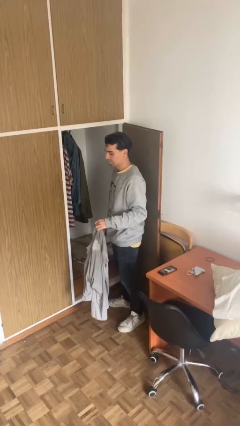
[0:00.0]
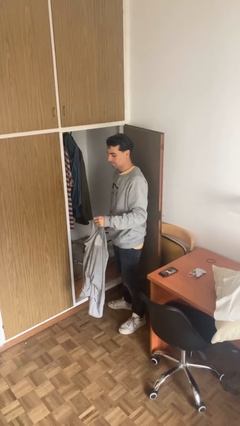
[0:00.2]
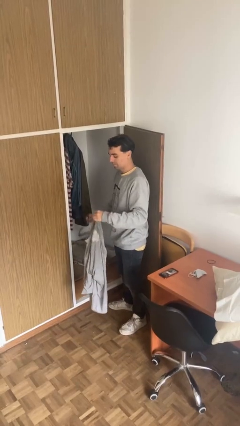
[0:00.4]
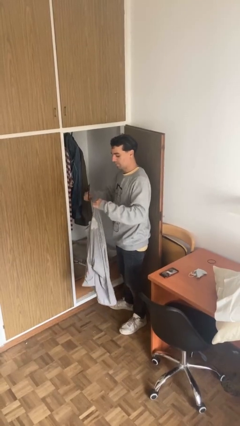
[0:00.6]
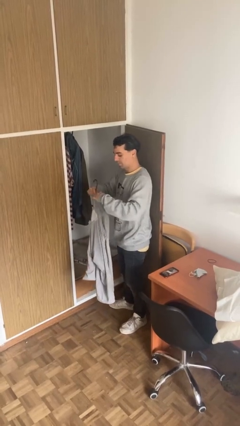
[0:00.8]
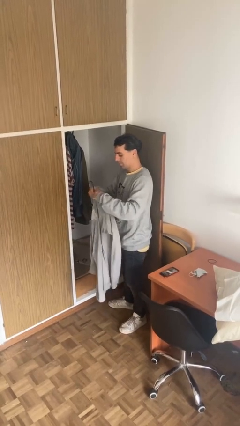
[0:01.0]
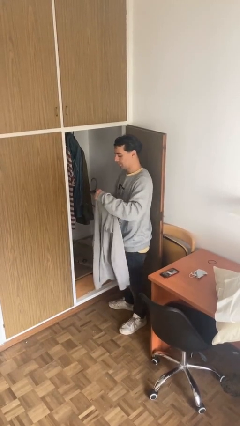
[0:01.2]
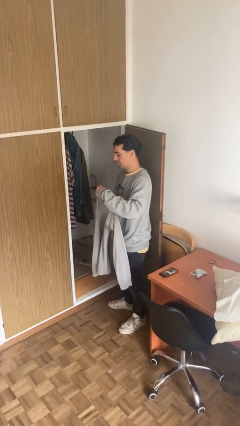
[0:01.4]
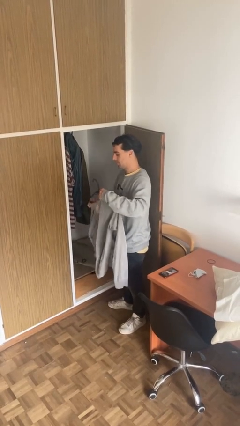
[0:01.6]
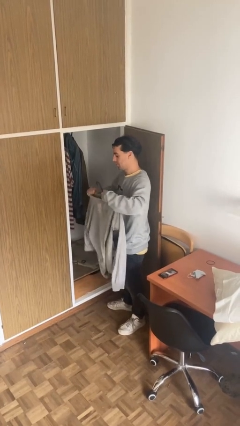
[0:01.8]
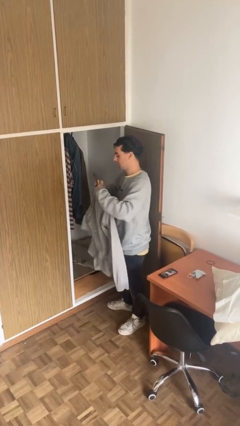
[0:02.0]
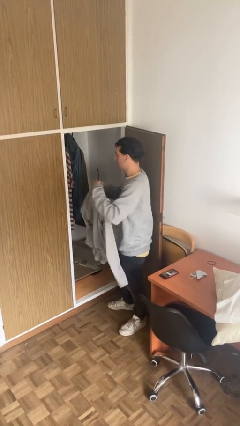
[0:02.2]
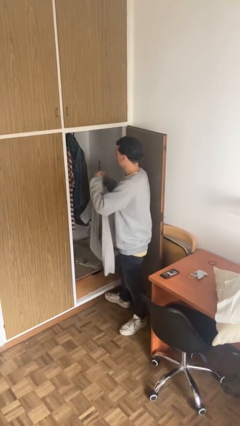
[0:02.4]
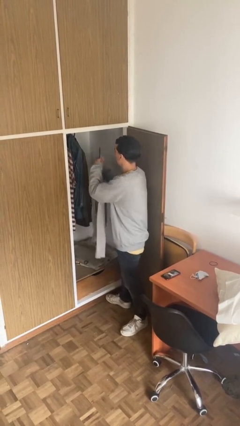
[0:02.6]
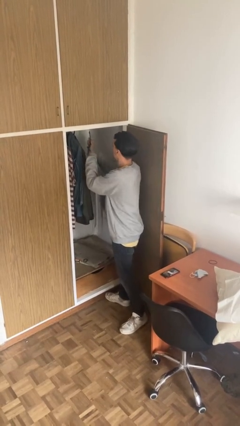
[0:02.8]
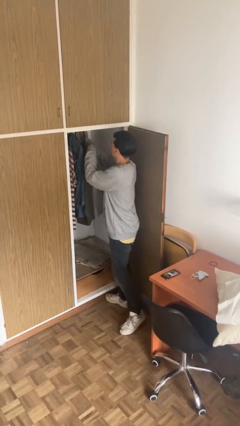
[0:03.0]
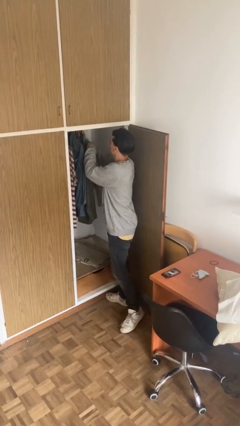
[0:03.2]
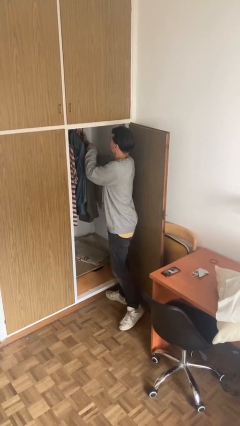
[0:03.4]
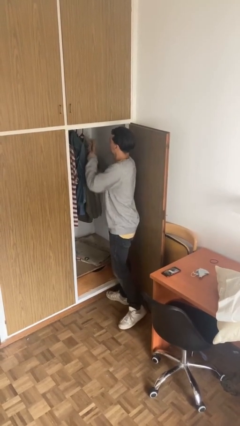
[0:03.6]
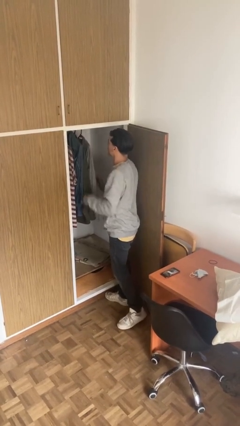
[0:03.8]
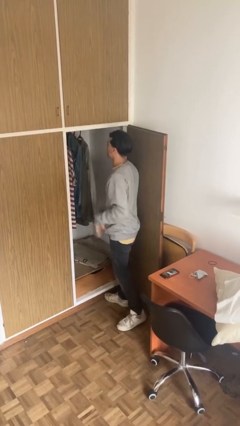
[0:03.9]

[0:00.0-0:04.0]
person puts clothes into closet

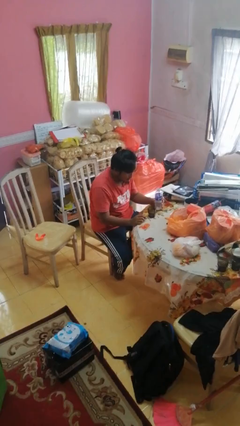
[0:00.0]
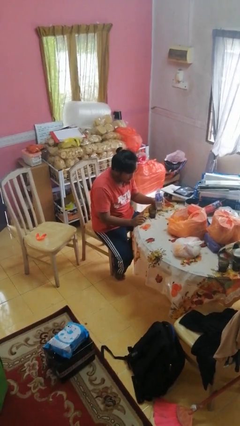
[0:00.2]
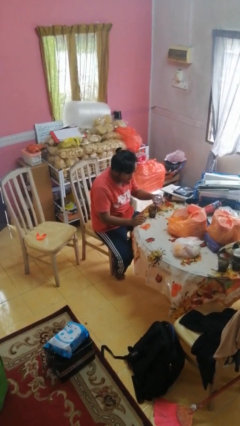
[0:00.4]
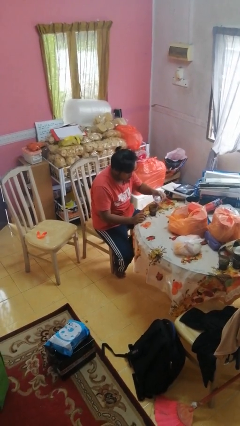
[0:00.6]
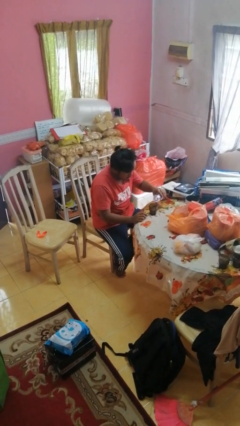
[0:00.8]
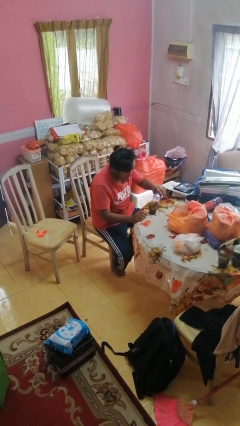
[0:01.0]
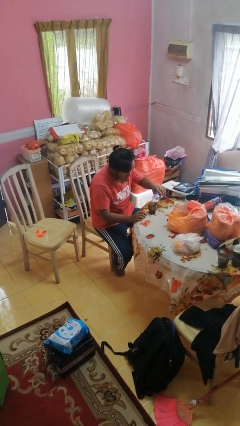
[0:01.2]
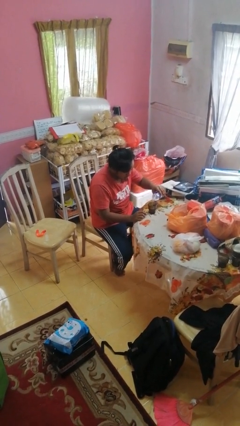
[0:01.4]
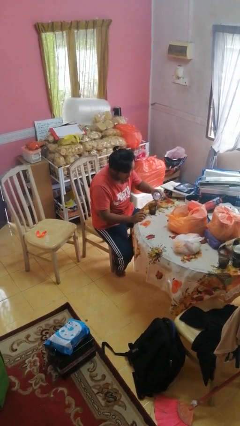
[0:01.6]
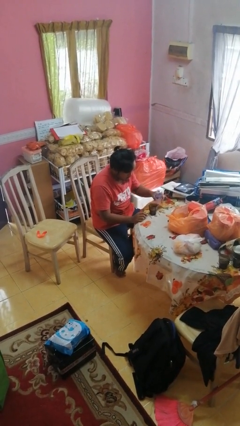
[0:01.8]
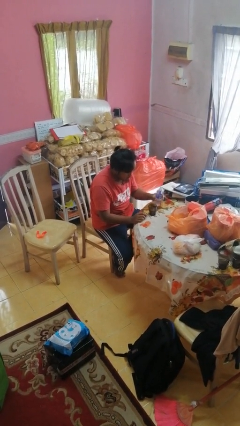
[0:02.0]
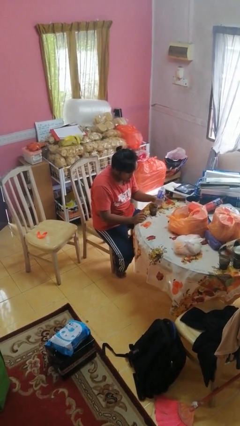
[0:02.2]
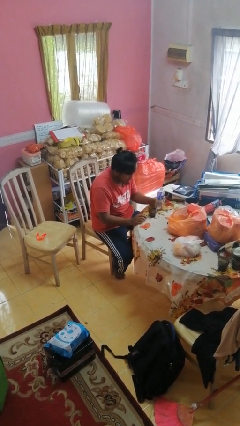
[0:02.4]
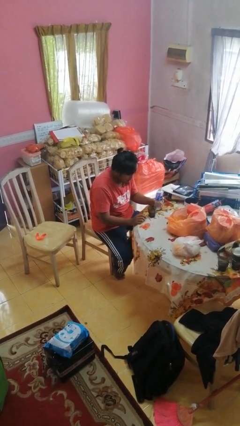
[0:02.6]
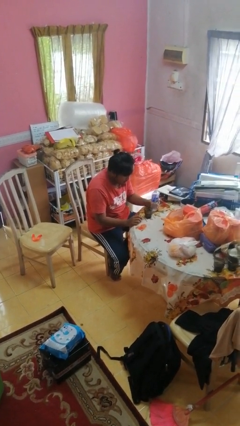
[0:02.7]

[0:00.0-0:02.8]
person pours liquid into cup

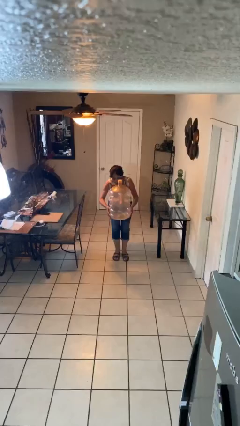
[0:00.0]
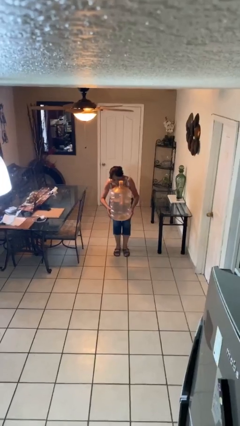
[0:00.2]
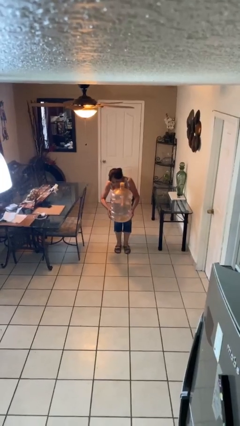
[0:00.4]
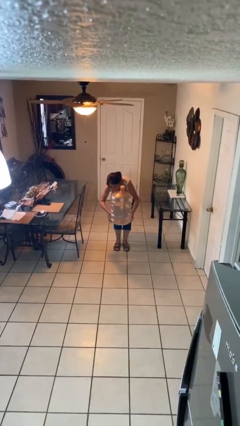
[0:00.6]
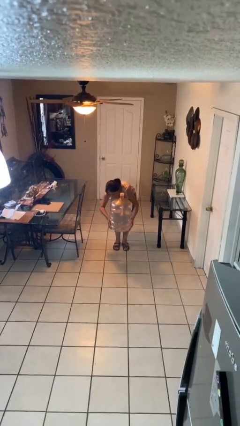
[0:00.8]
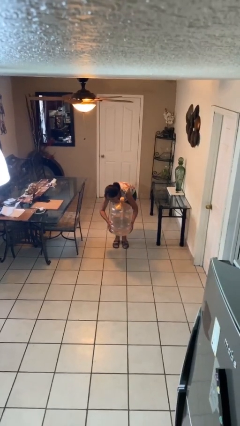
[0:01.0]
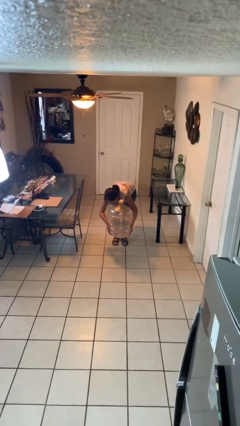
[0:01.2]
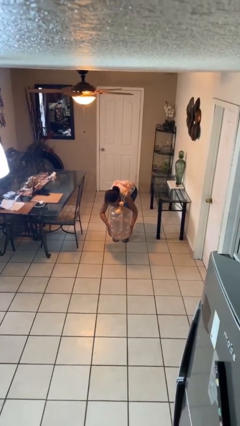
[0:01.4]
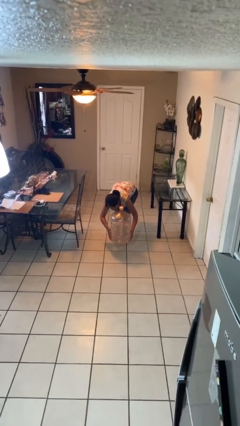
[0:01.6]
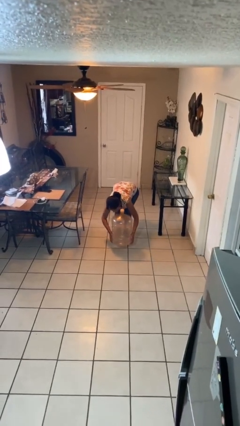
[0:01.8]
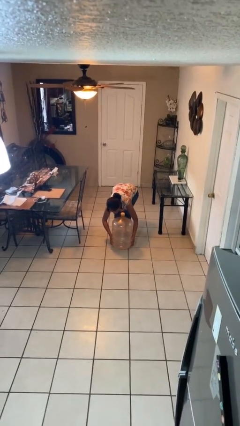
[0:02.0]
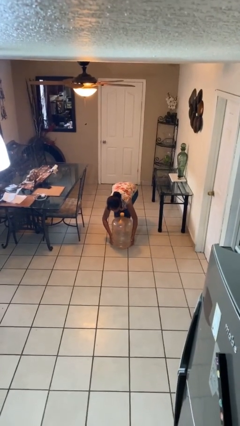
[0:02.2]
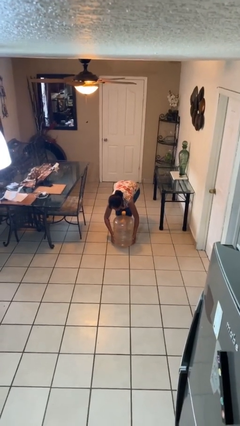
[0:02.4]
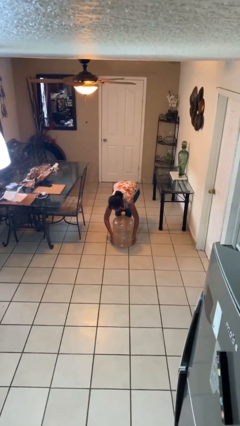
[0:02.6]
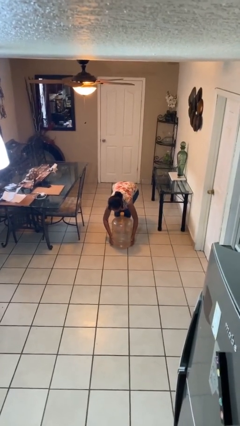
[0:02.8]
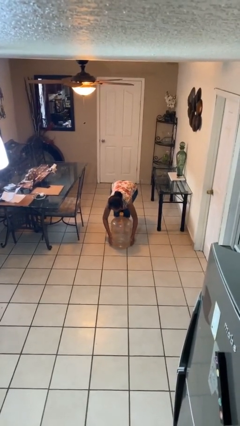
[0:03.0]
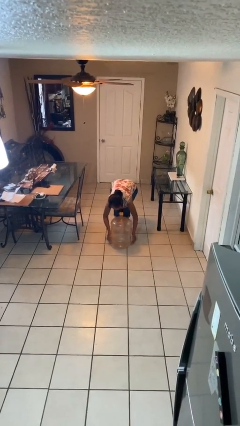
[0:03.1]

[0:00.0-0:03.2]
person puts down object on floor

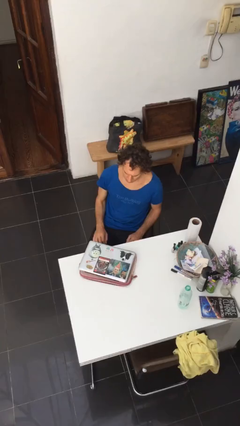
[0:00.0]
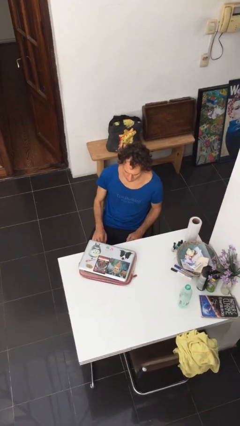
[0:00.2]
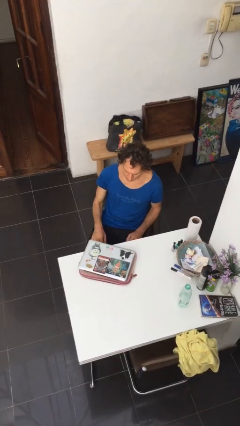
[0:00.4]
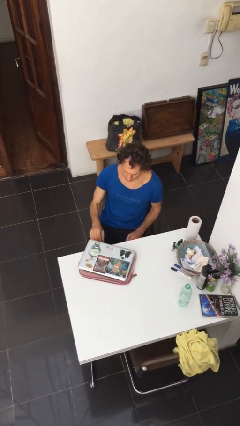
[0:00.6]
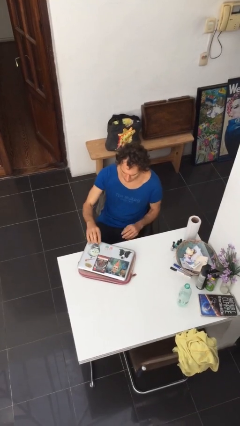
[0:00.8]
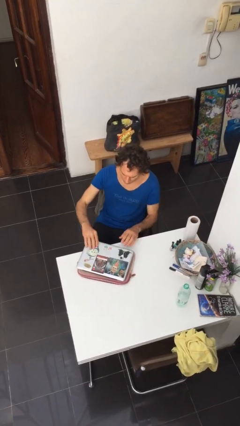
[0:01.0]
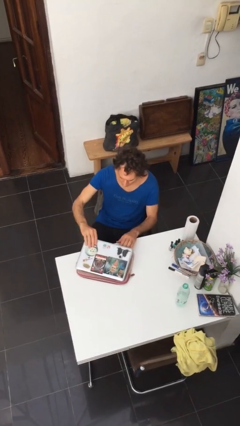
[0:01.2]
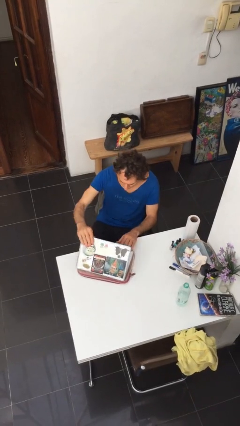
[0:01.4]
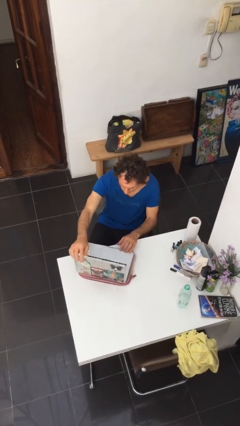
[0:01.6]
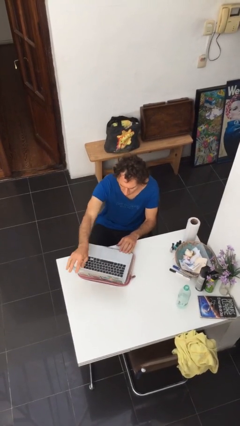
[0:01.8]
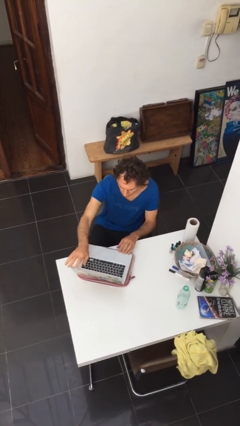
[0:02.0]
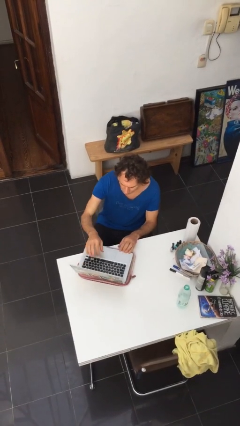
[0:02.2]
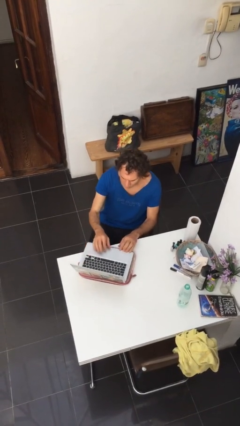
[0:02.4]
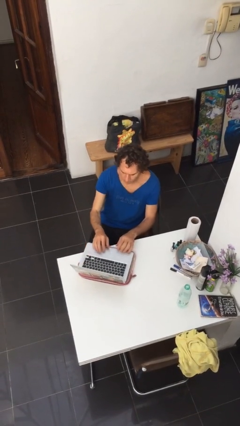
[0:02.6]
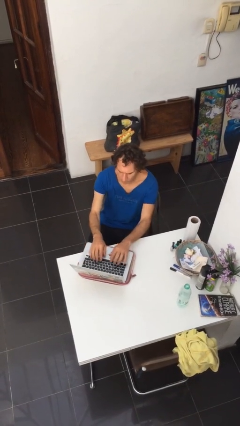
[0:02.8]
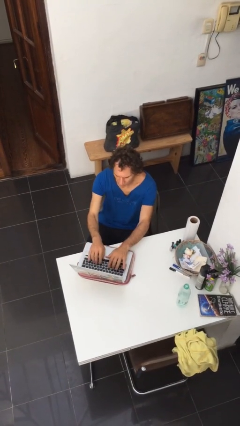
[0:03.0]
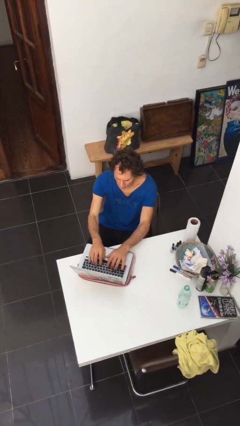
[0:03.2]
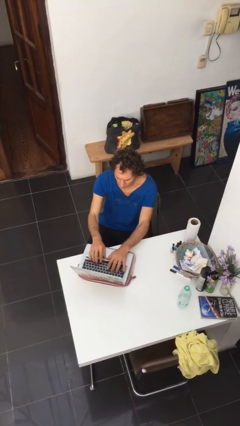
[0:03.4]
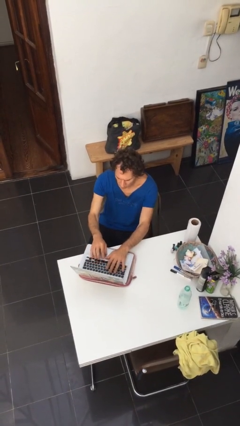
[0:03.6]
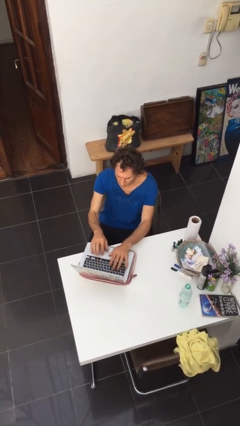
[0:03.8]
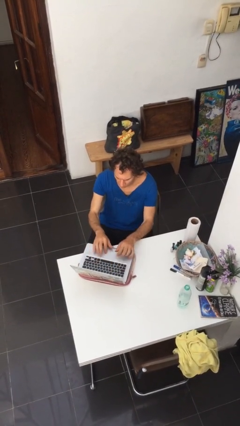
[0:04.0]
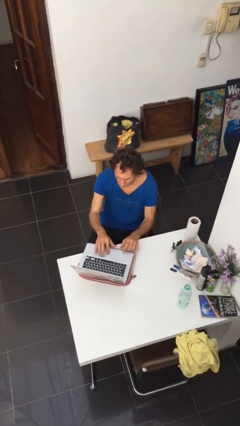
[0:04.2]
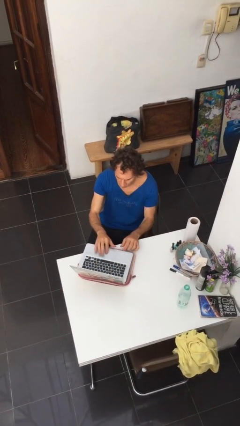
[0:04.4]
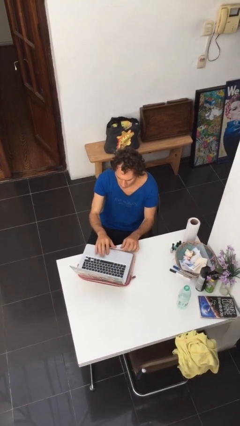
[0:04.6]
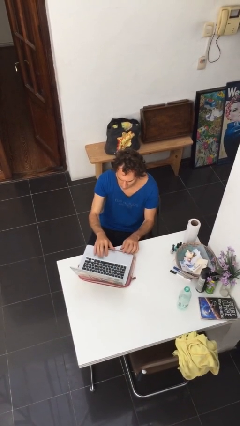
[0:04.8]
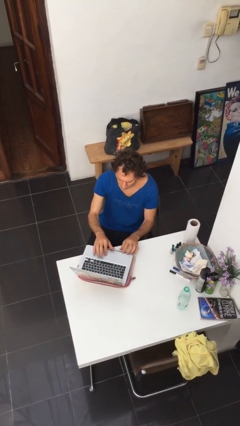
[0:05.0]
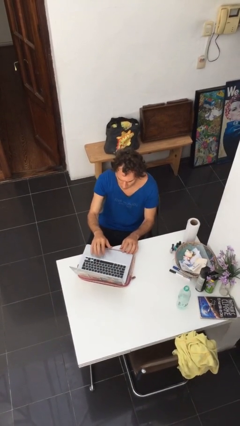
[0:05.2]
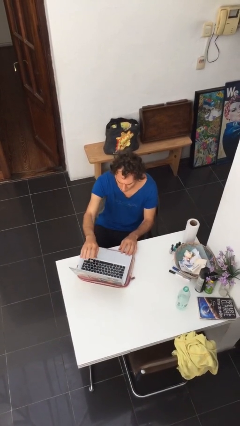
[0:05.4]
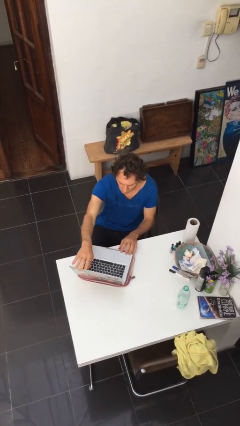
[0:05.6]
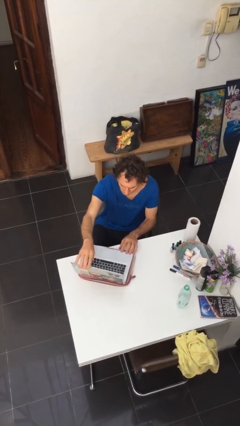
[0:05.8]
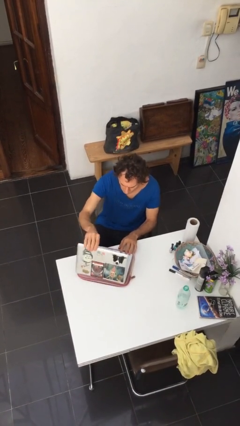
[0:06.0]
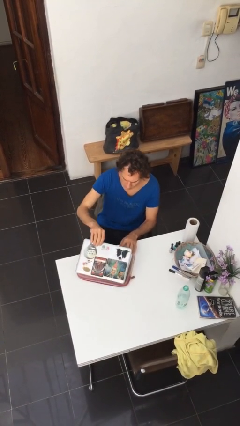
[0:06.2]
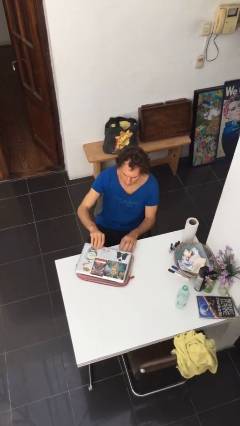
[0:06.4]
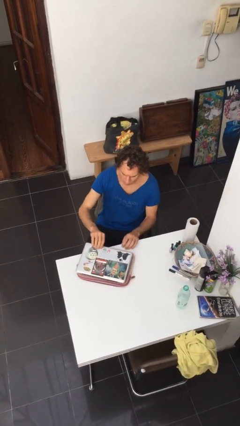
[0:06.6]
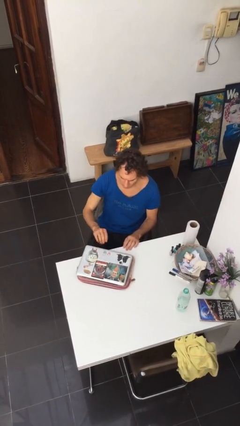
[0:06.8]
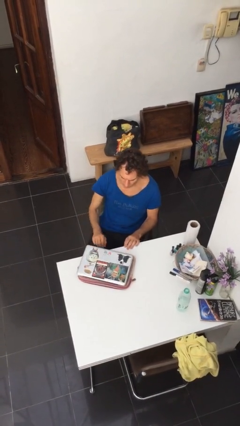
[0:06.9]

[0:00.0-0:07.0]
person interacts with laptop

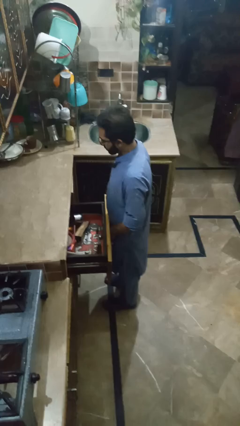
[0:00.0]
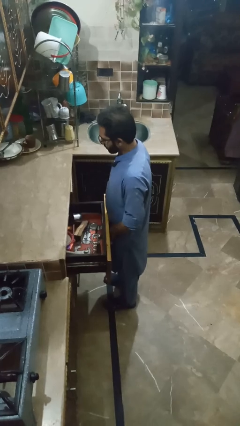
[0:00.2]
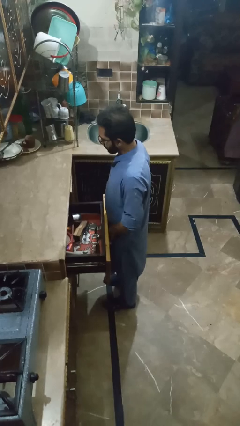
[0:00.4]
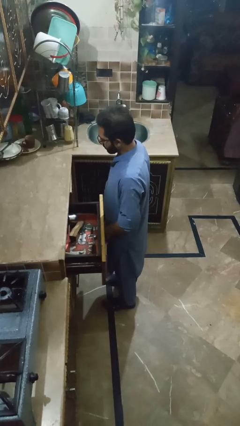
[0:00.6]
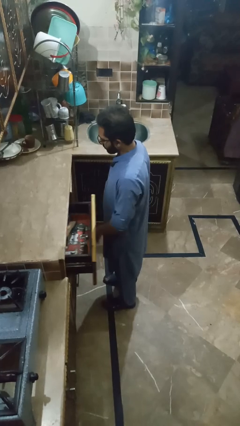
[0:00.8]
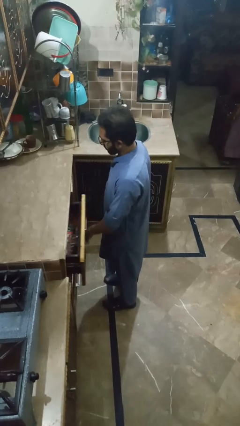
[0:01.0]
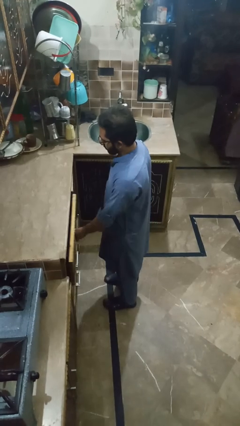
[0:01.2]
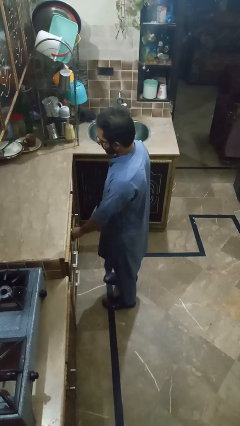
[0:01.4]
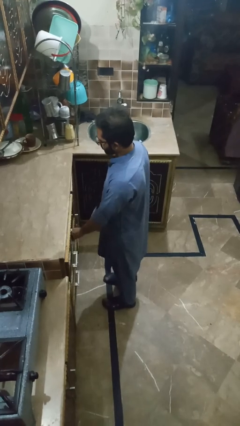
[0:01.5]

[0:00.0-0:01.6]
person closes kitchen drawer
